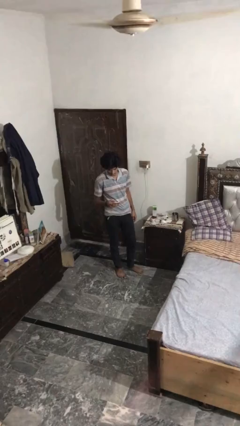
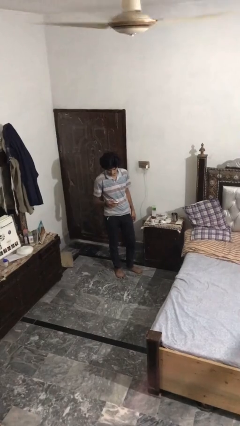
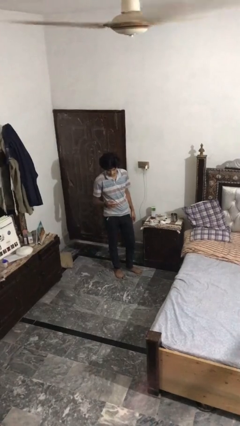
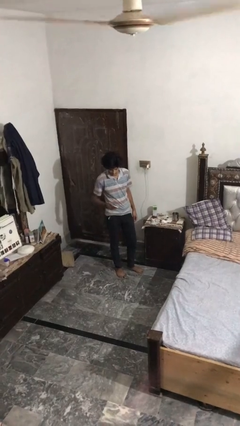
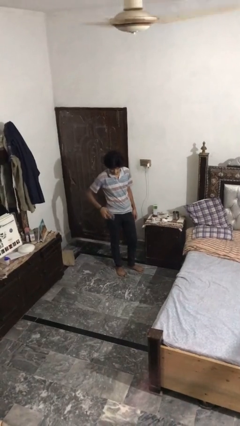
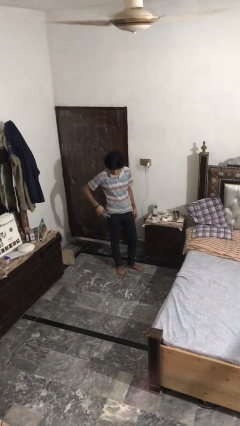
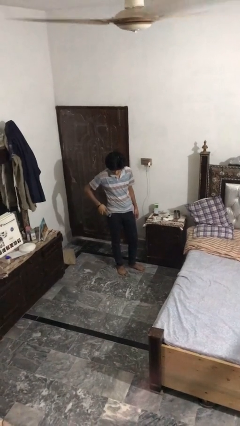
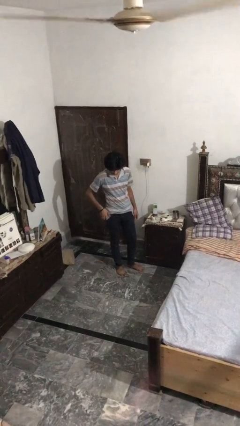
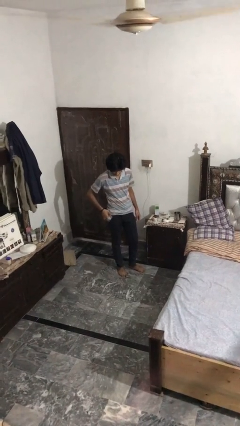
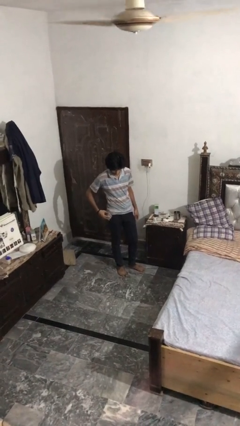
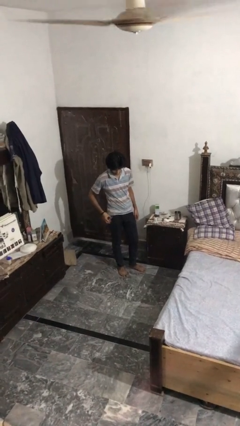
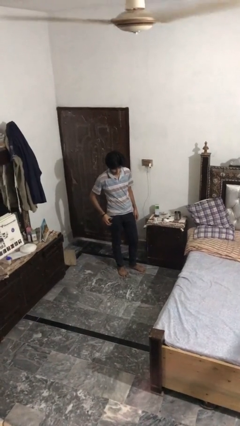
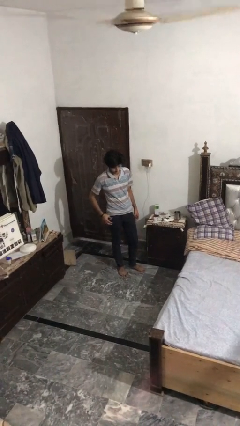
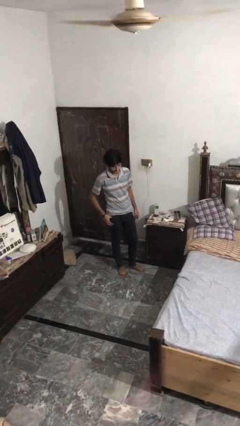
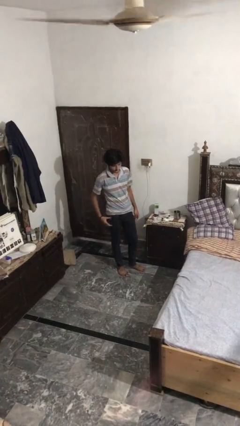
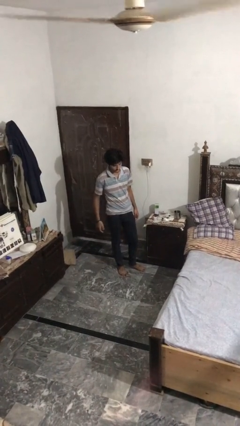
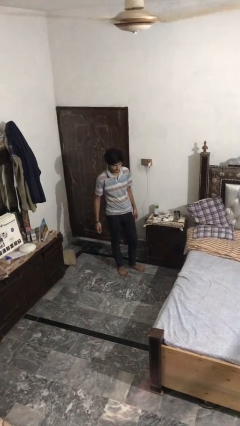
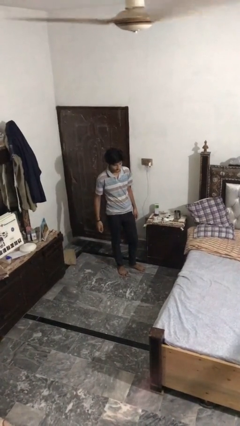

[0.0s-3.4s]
person puts phone into pocket

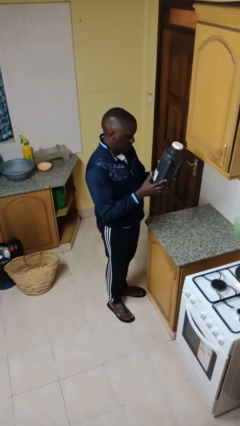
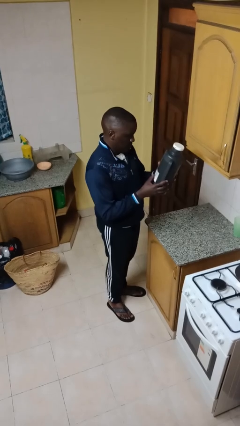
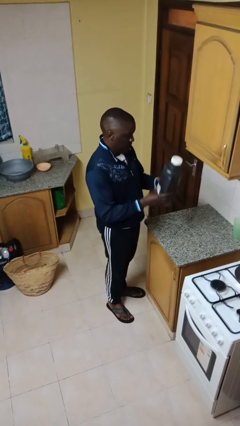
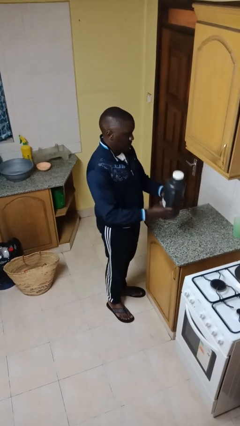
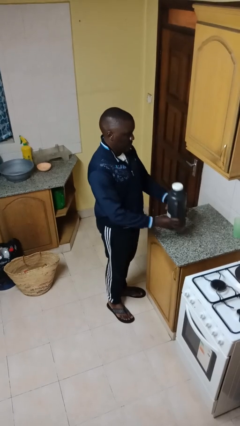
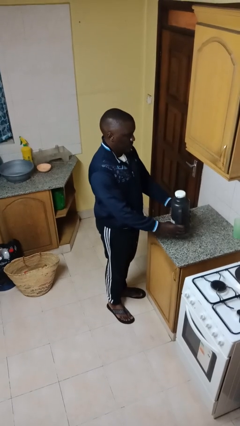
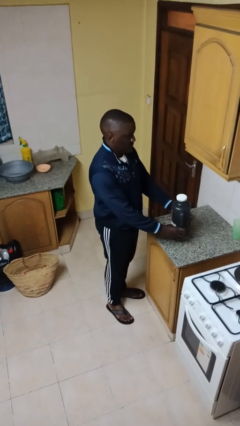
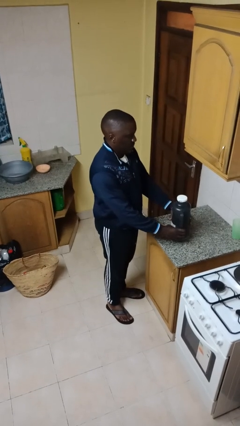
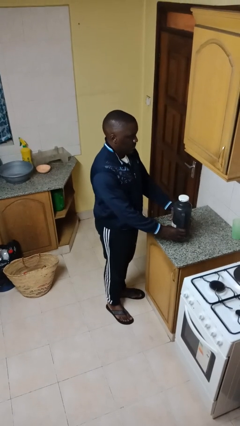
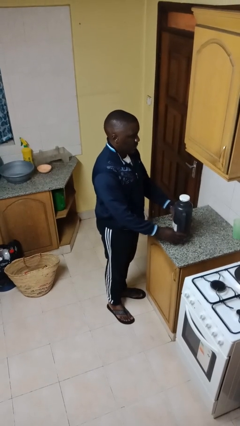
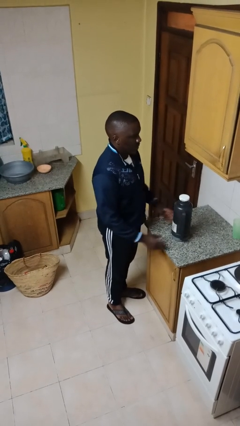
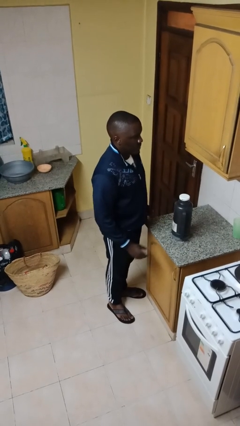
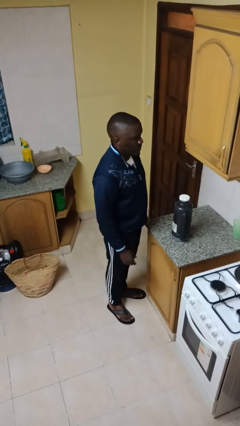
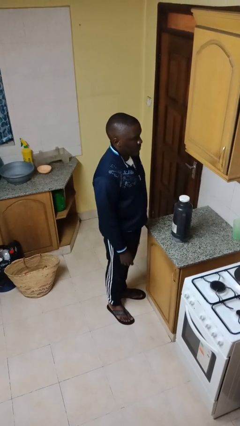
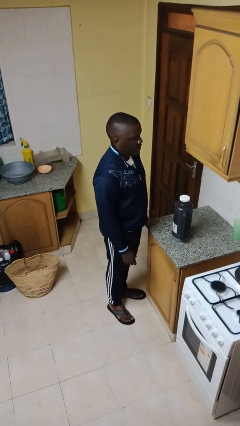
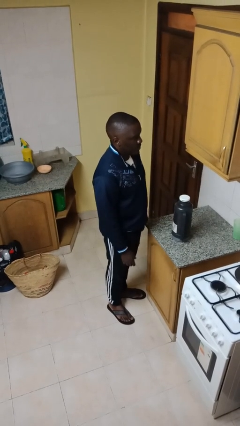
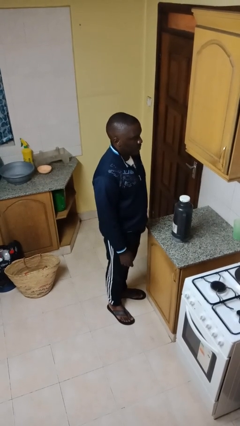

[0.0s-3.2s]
person puts down object on countertop

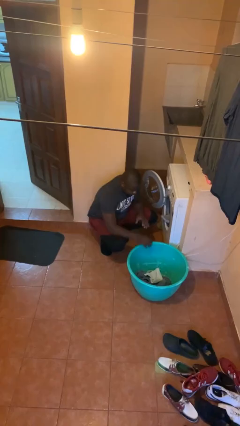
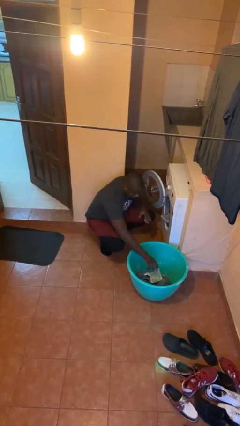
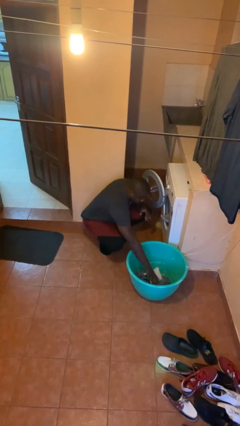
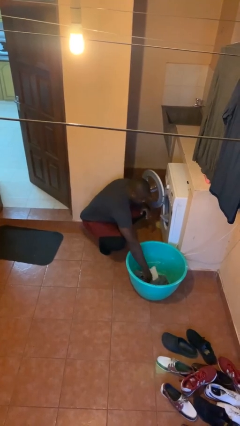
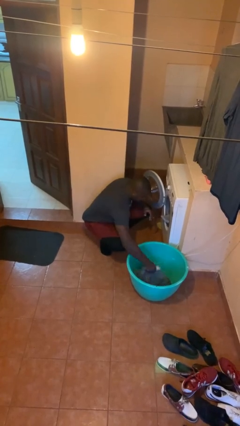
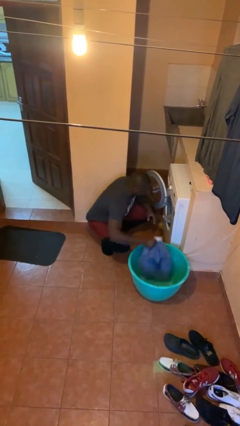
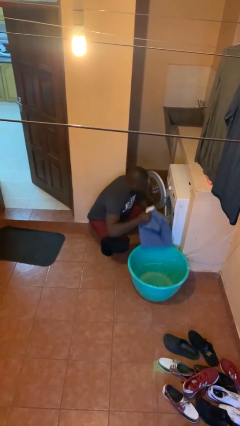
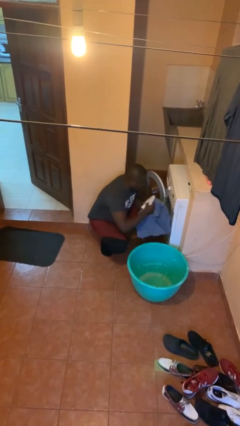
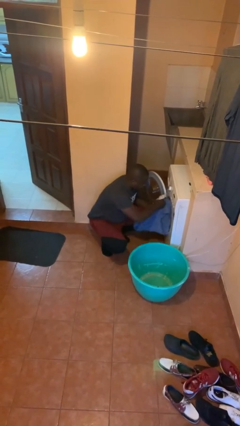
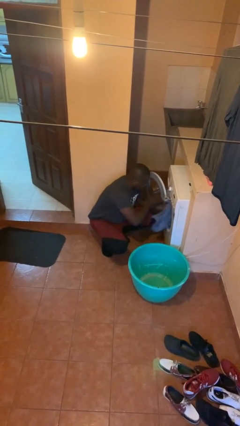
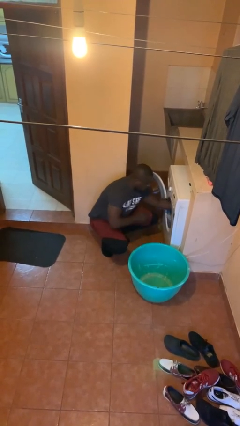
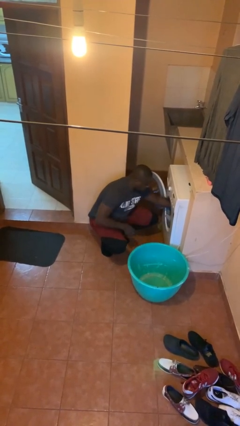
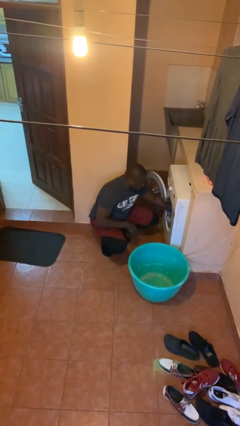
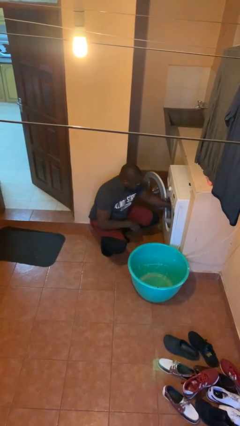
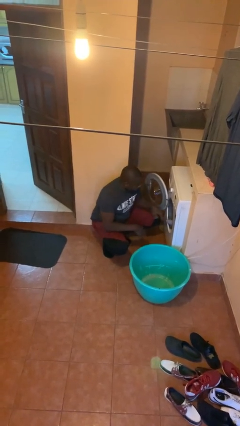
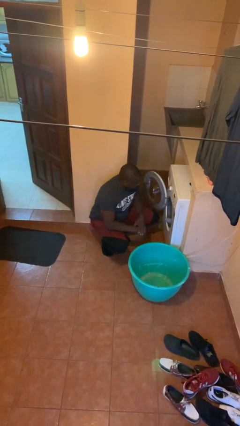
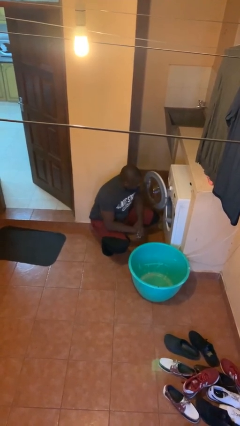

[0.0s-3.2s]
person loads clotheswasher

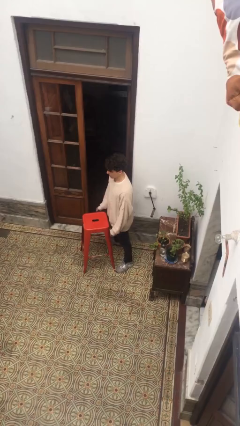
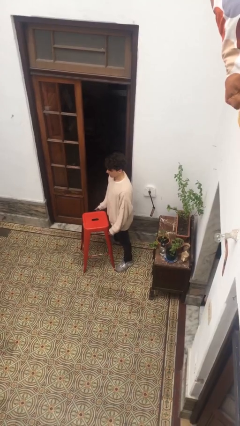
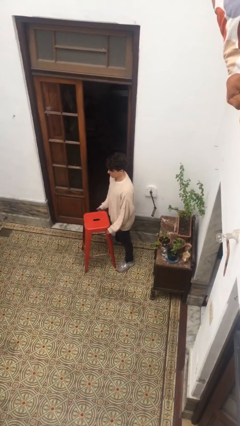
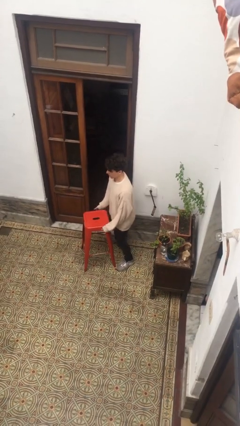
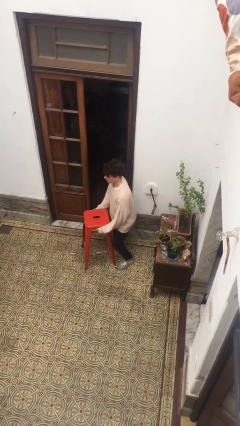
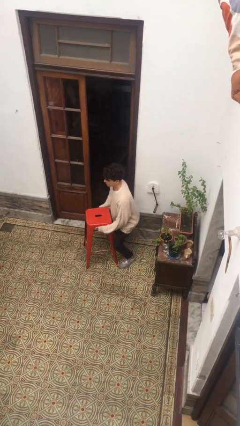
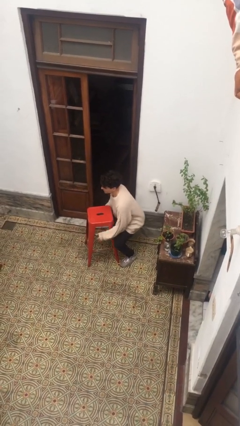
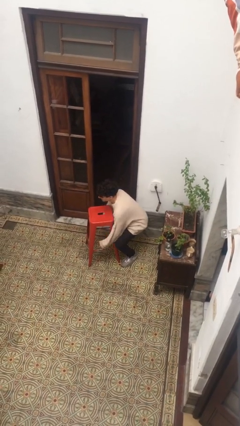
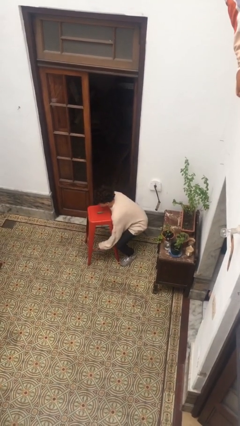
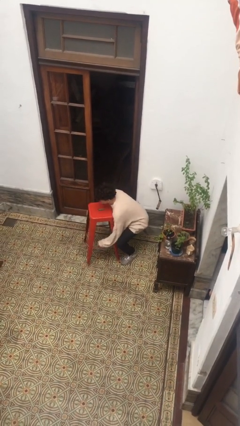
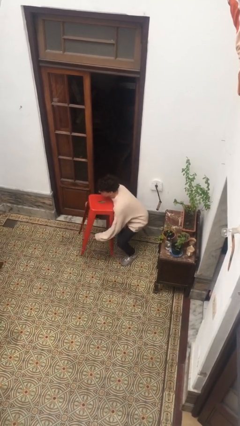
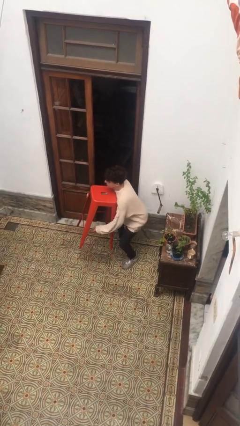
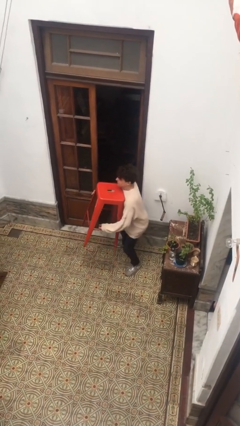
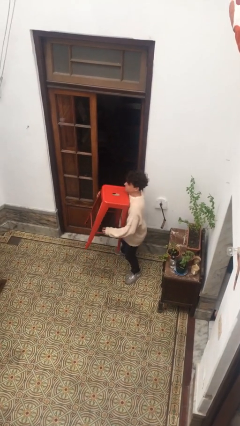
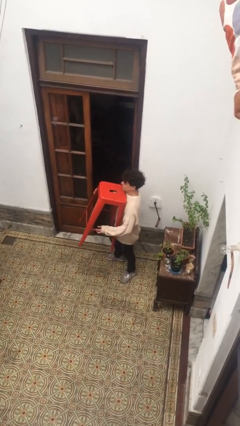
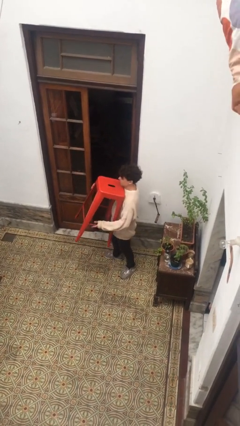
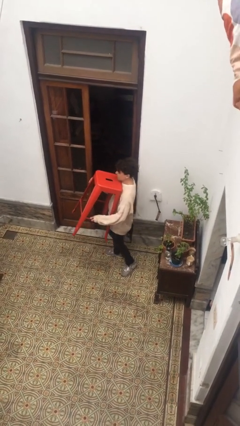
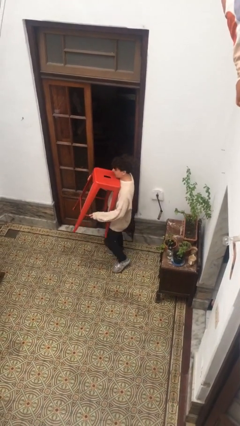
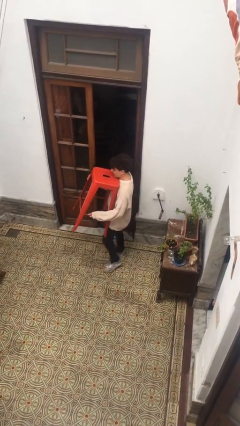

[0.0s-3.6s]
person picks up object from floor

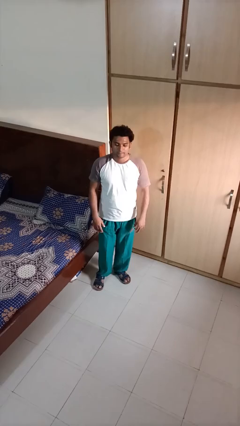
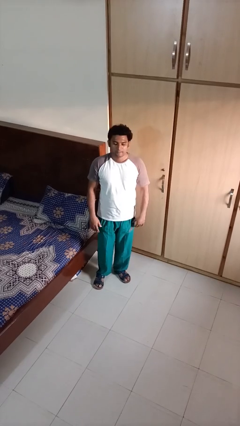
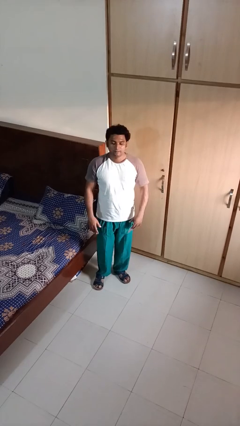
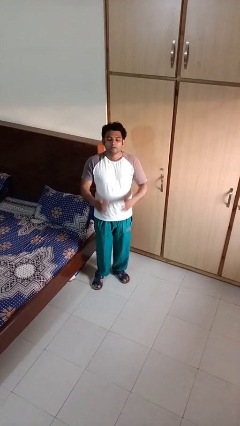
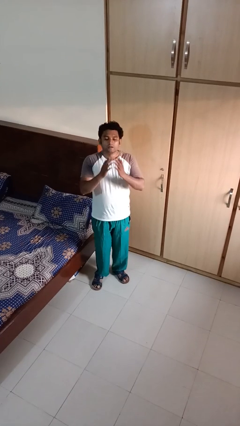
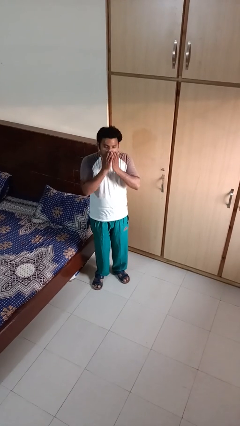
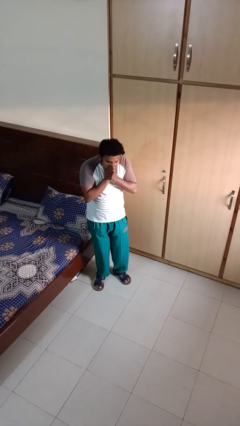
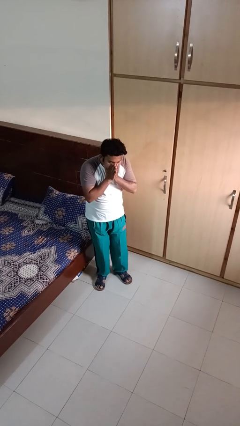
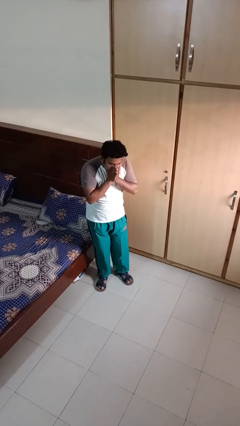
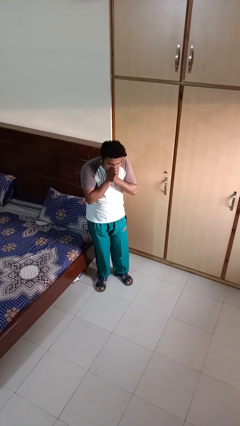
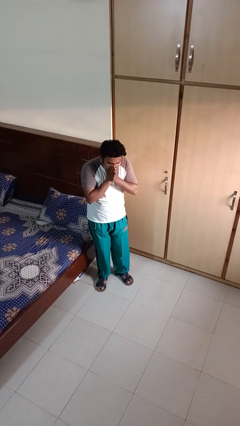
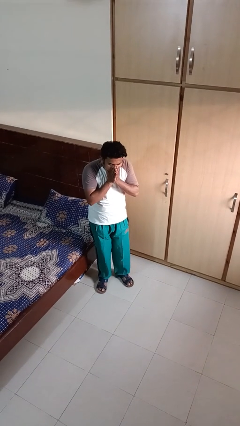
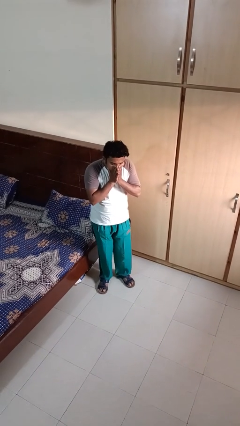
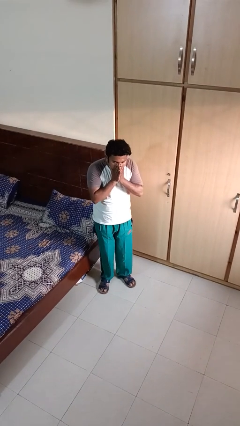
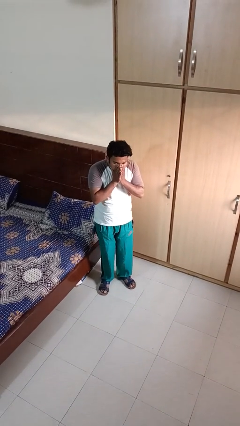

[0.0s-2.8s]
person sneezes into hand

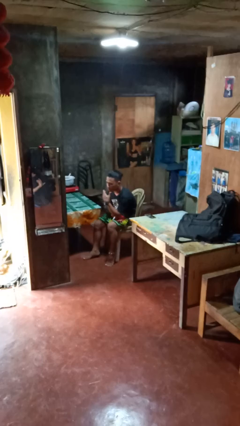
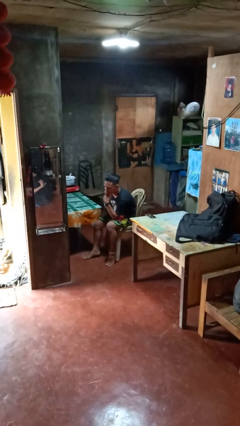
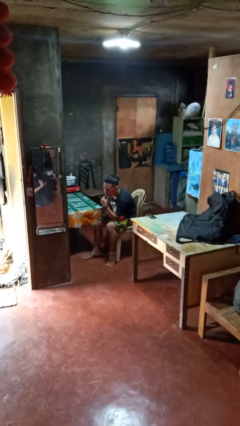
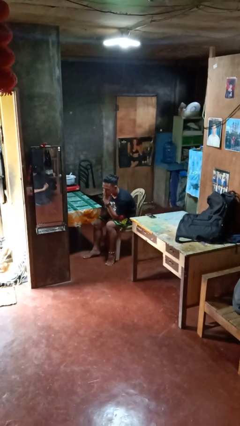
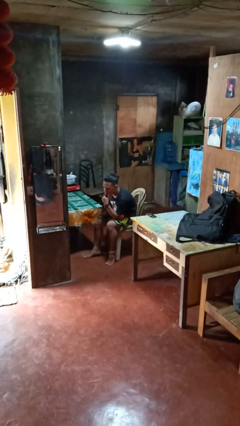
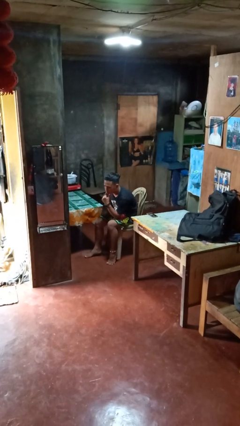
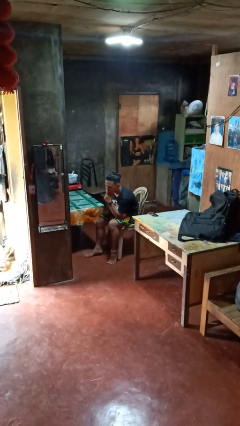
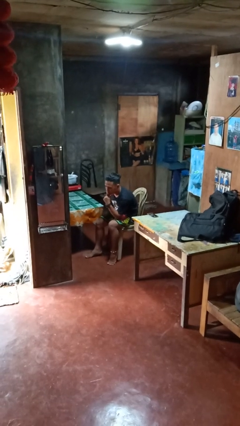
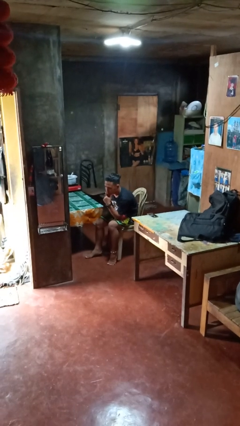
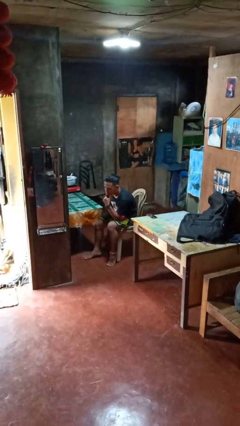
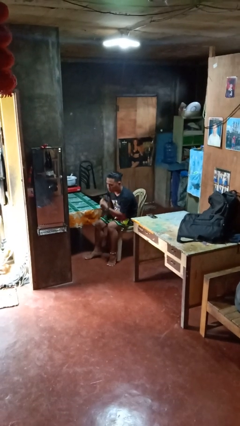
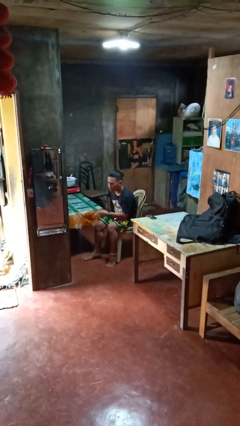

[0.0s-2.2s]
person strokes chin
